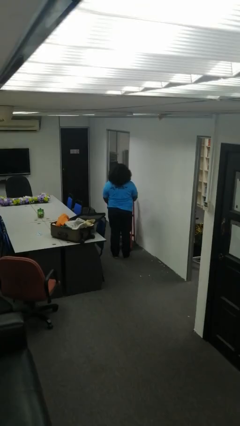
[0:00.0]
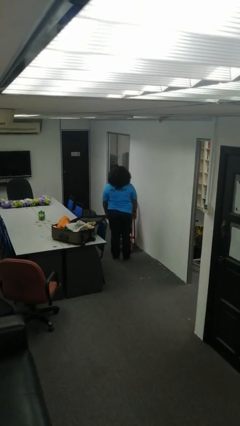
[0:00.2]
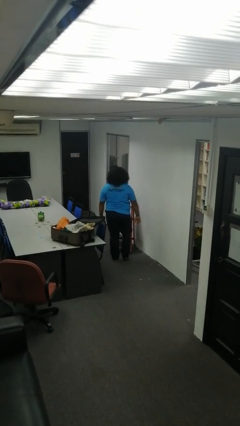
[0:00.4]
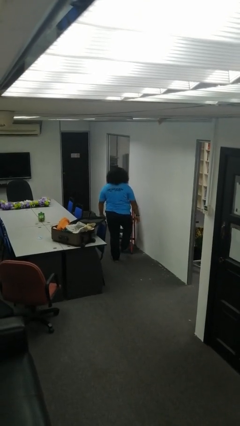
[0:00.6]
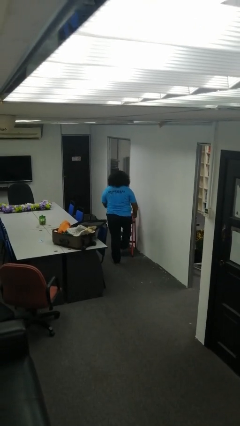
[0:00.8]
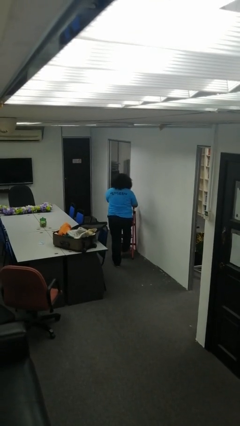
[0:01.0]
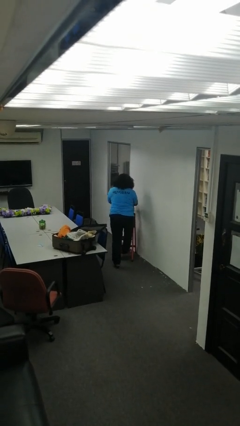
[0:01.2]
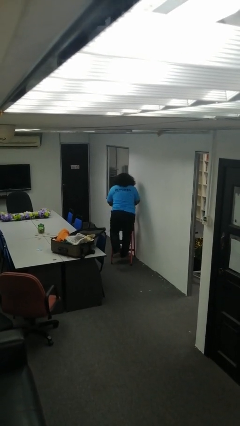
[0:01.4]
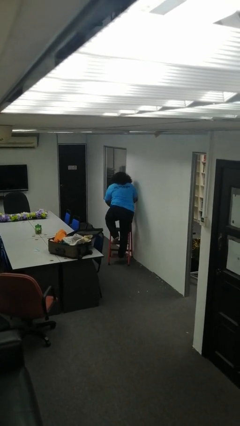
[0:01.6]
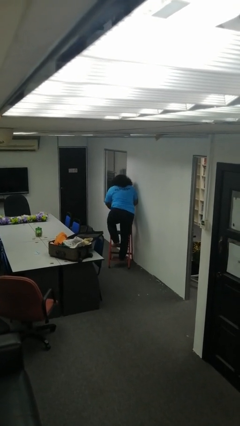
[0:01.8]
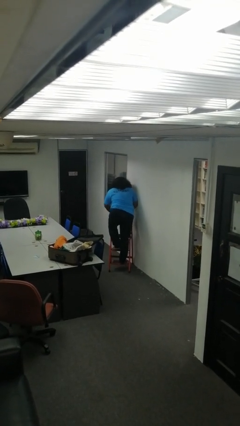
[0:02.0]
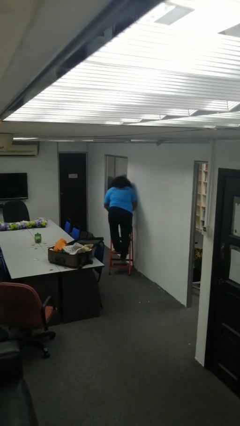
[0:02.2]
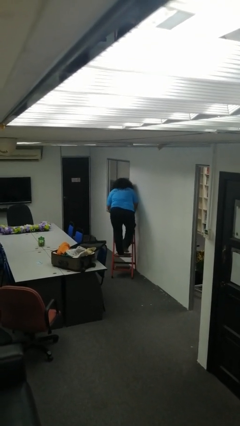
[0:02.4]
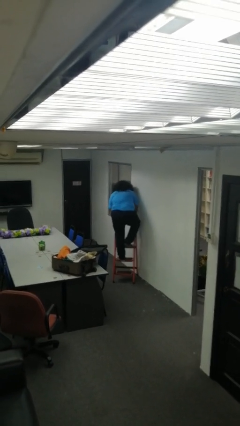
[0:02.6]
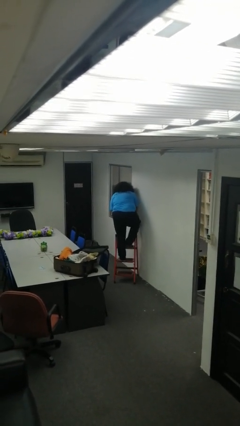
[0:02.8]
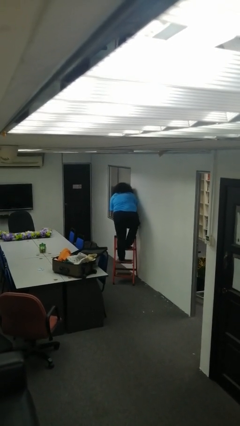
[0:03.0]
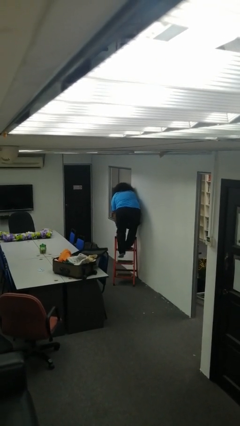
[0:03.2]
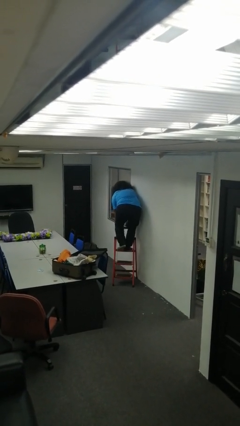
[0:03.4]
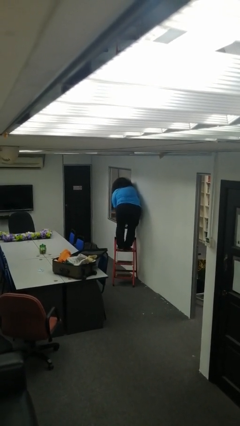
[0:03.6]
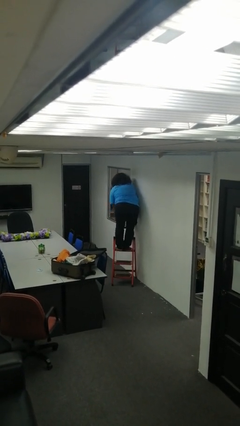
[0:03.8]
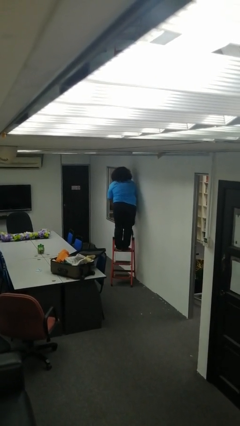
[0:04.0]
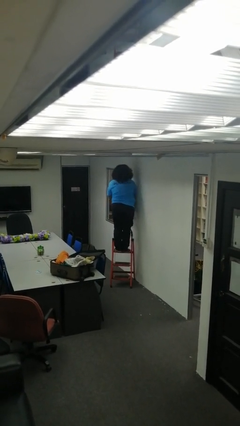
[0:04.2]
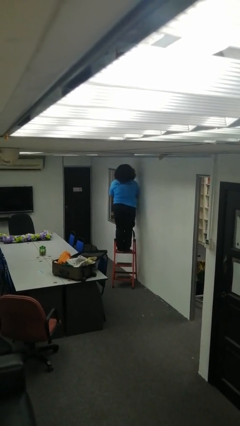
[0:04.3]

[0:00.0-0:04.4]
person climbs up ladder

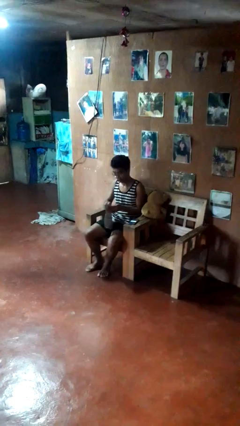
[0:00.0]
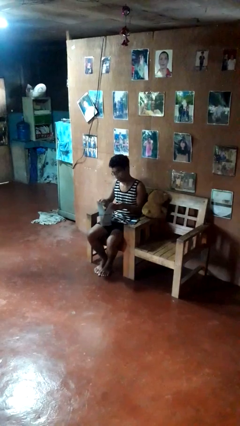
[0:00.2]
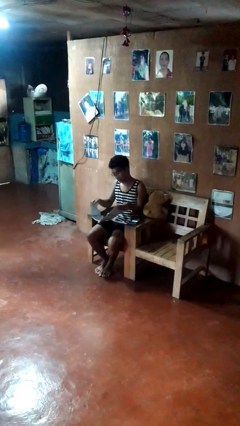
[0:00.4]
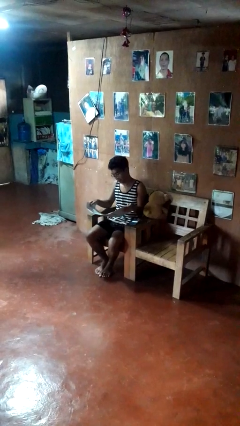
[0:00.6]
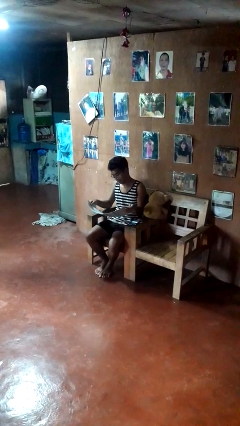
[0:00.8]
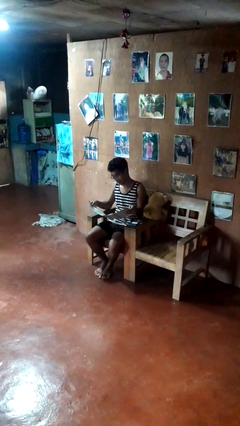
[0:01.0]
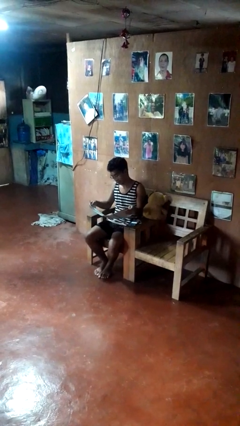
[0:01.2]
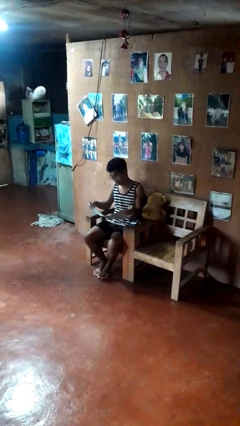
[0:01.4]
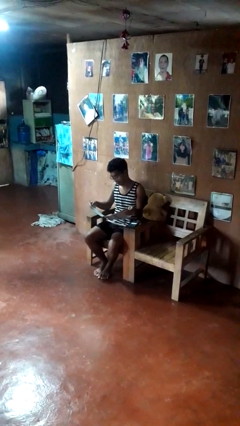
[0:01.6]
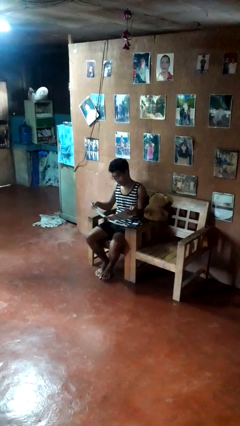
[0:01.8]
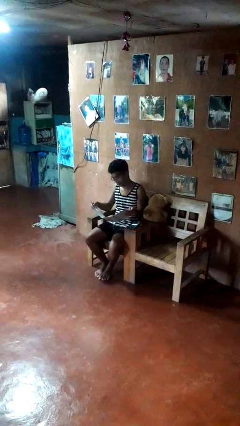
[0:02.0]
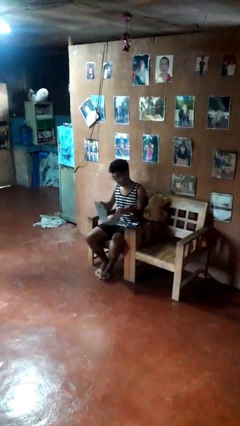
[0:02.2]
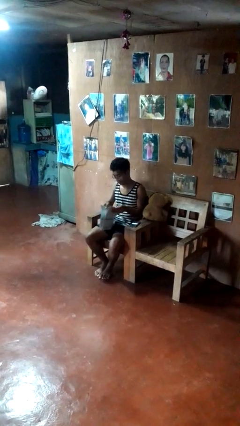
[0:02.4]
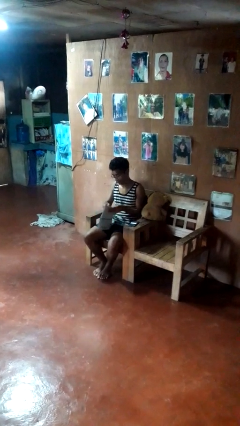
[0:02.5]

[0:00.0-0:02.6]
person reads newspaper

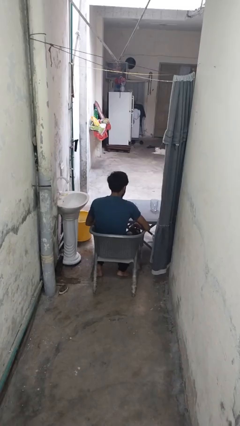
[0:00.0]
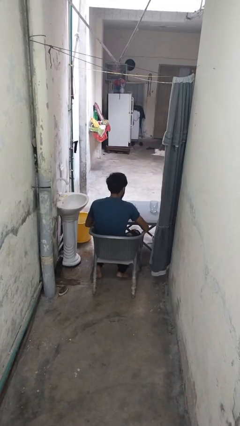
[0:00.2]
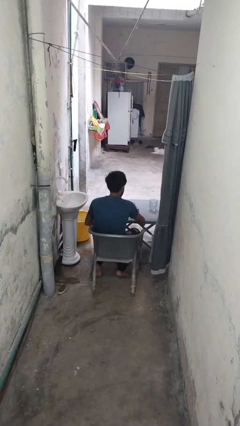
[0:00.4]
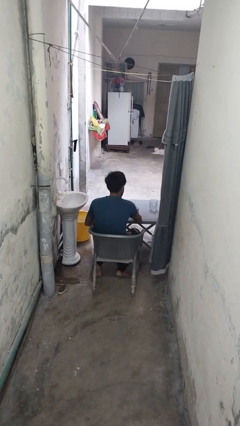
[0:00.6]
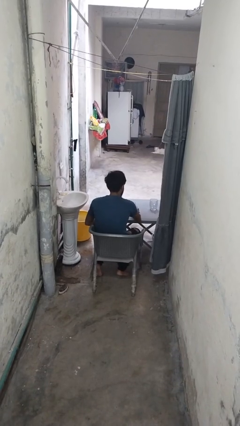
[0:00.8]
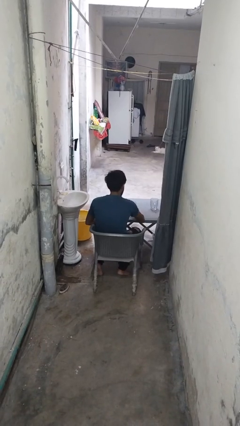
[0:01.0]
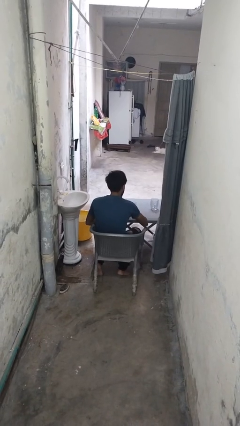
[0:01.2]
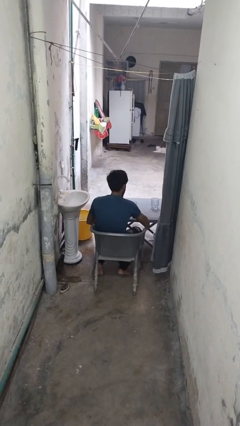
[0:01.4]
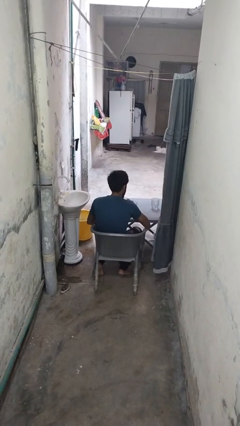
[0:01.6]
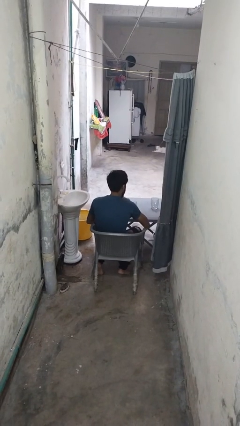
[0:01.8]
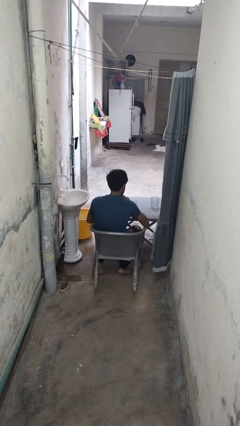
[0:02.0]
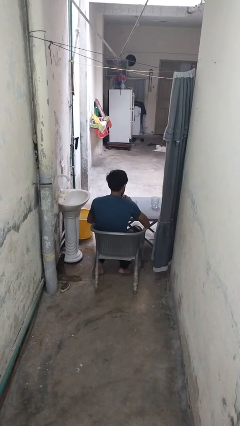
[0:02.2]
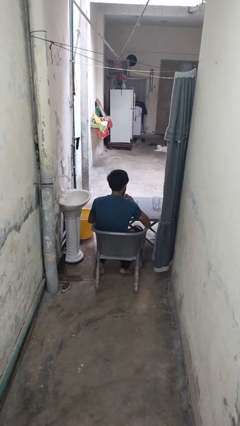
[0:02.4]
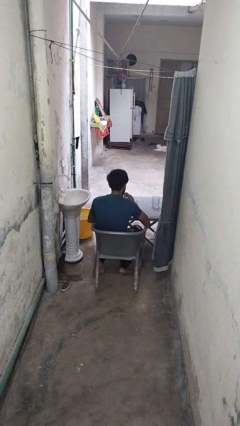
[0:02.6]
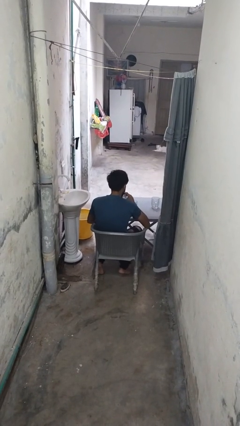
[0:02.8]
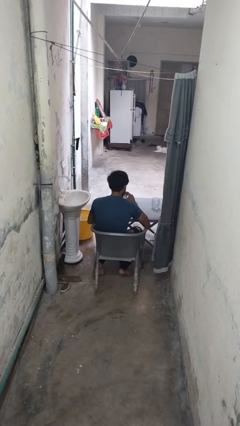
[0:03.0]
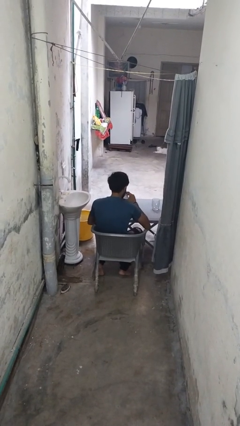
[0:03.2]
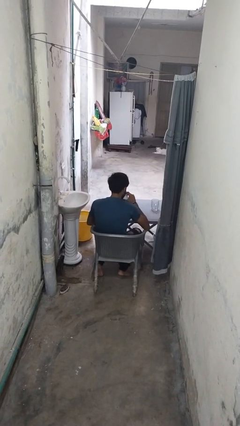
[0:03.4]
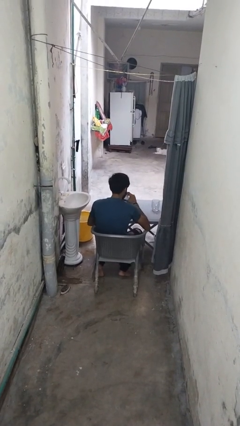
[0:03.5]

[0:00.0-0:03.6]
person picks up object from table

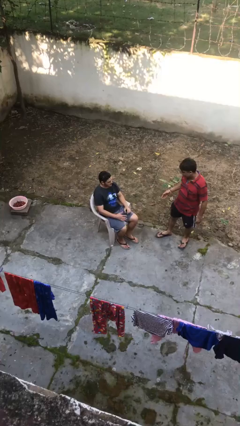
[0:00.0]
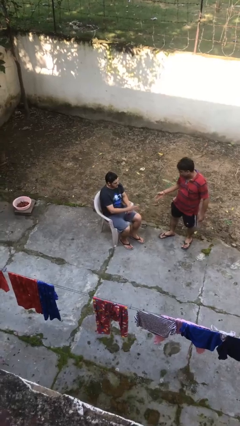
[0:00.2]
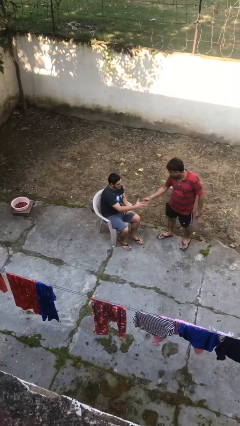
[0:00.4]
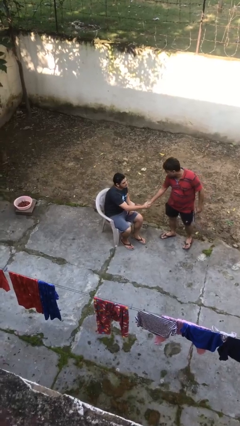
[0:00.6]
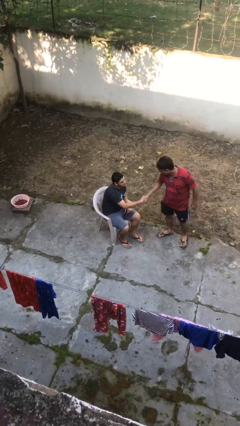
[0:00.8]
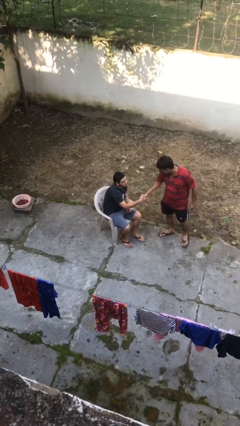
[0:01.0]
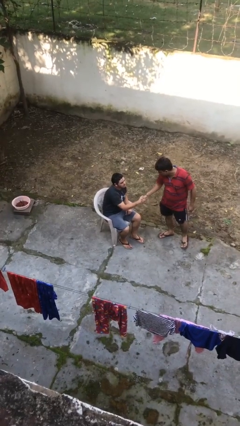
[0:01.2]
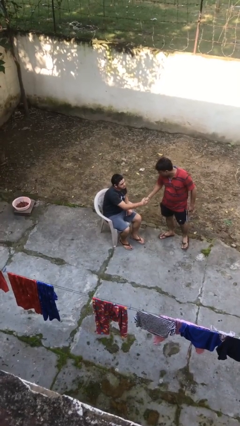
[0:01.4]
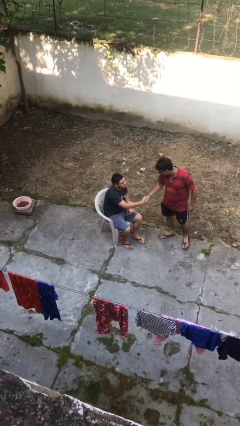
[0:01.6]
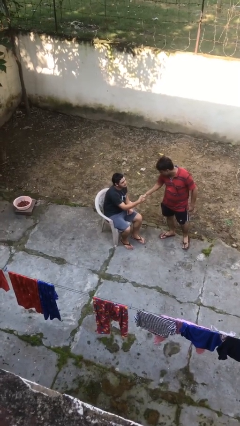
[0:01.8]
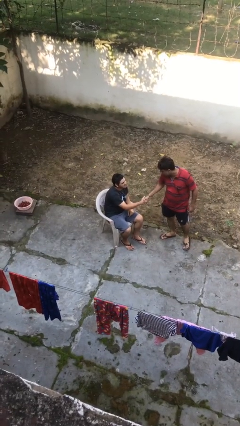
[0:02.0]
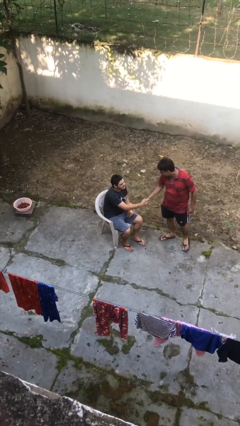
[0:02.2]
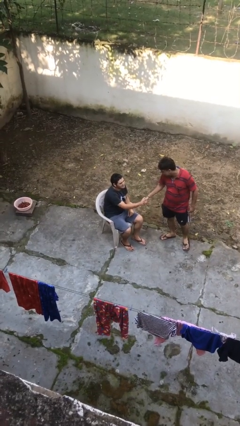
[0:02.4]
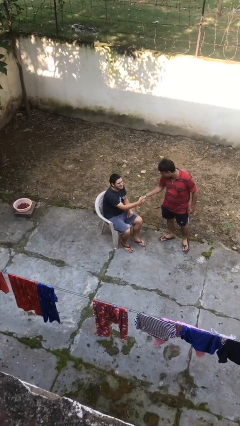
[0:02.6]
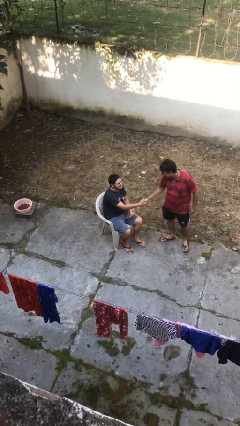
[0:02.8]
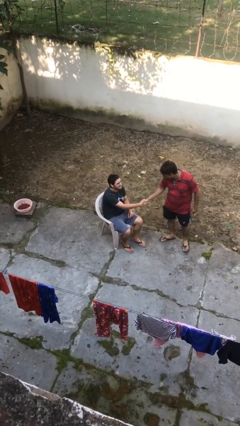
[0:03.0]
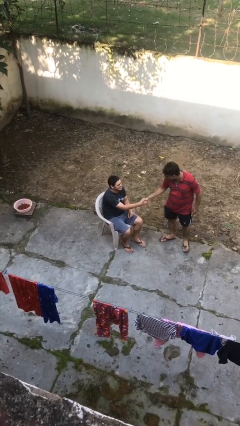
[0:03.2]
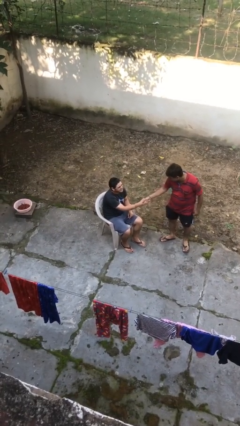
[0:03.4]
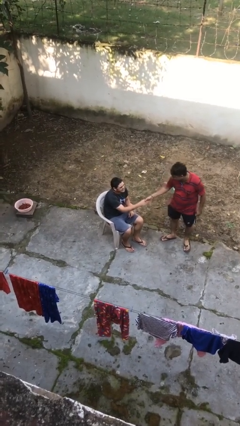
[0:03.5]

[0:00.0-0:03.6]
person shakes hand

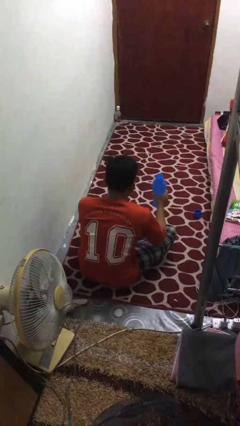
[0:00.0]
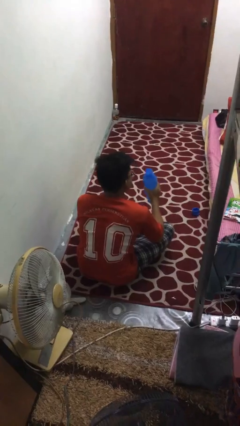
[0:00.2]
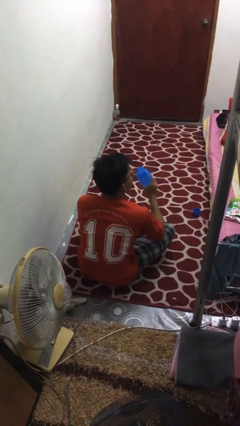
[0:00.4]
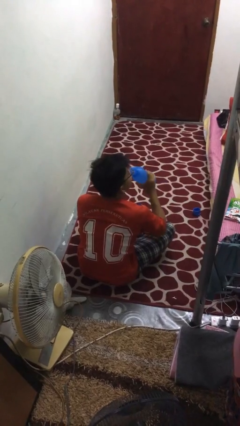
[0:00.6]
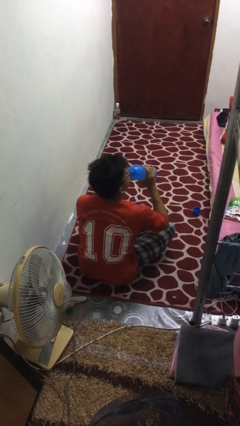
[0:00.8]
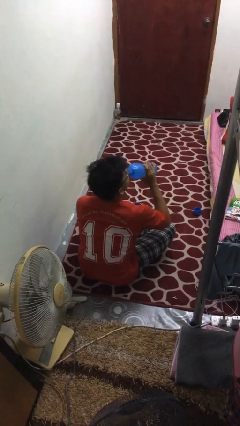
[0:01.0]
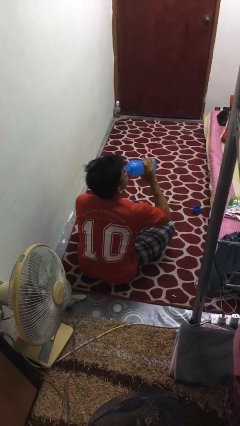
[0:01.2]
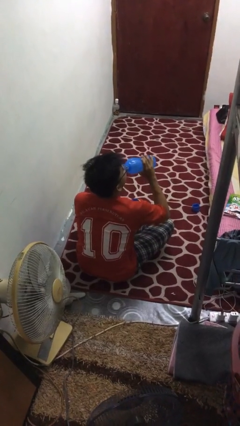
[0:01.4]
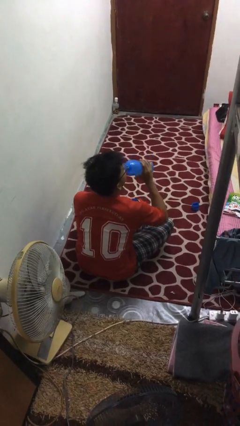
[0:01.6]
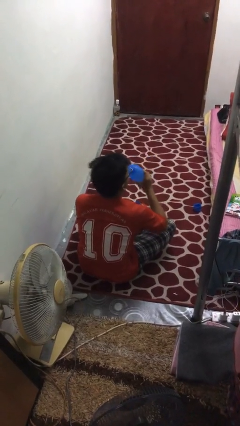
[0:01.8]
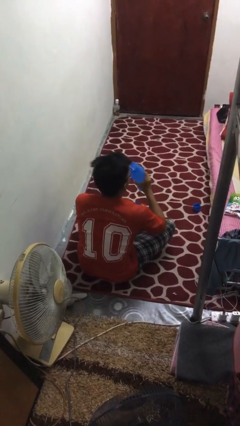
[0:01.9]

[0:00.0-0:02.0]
person drinks from bottle

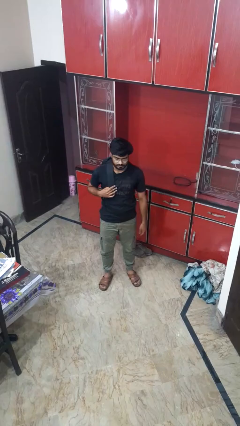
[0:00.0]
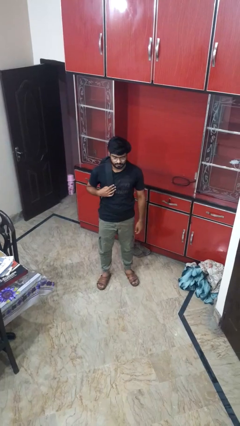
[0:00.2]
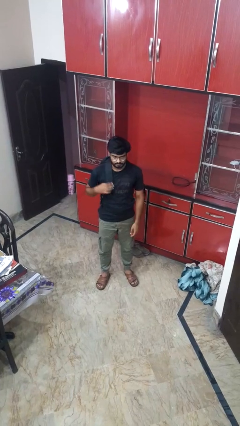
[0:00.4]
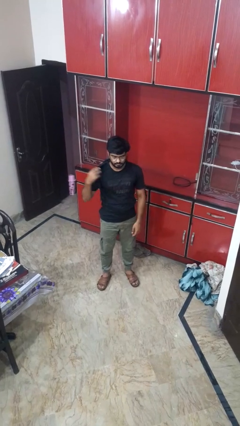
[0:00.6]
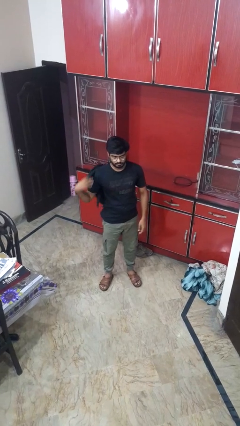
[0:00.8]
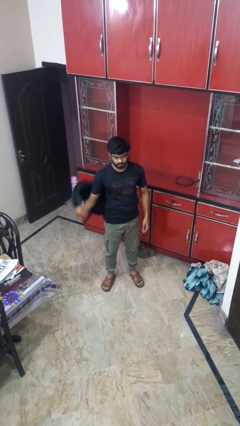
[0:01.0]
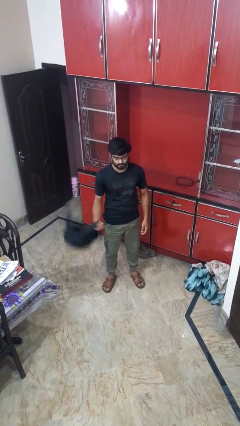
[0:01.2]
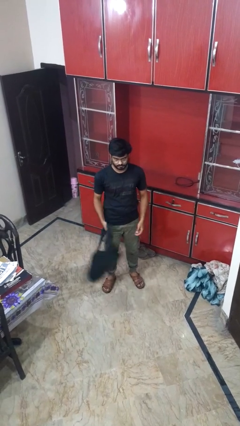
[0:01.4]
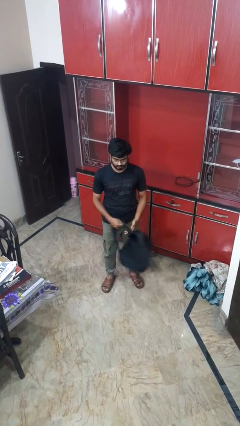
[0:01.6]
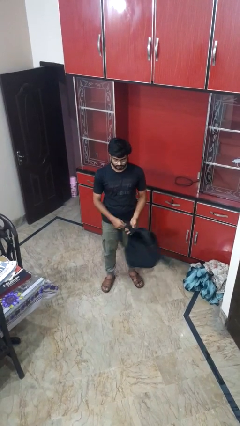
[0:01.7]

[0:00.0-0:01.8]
person takes off backpack
